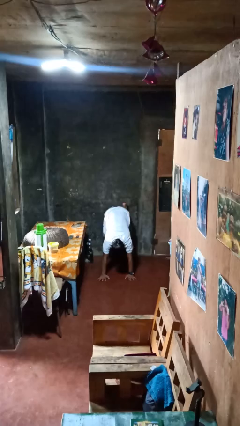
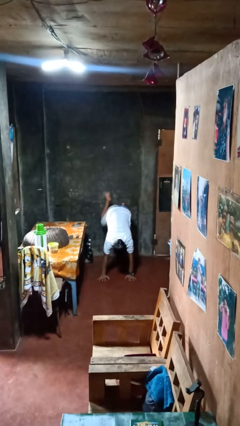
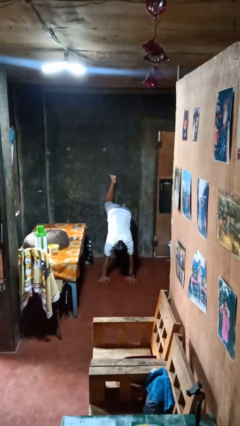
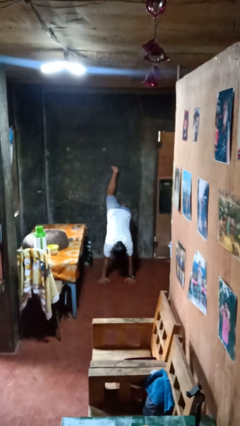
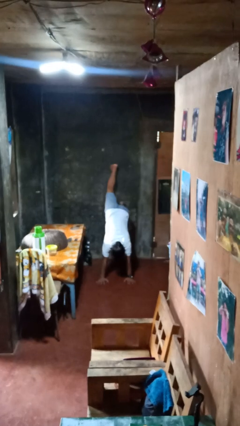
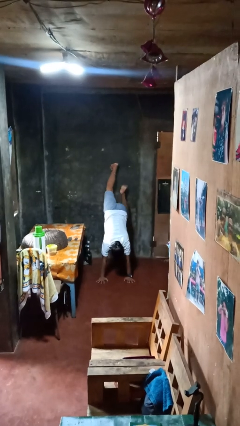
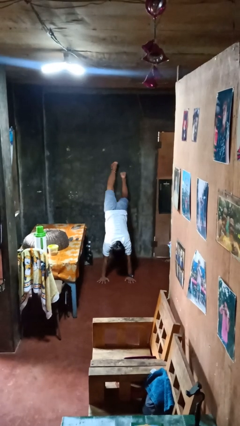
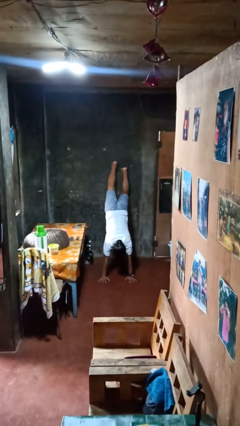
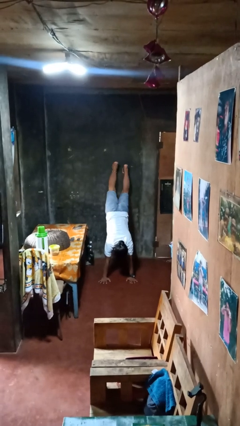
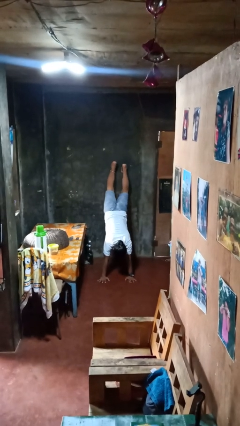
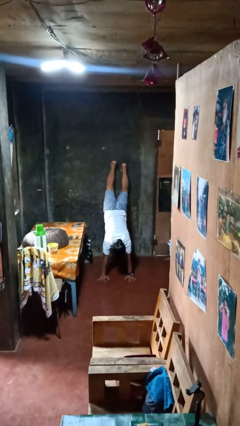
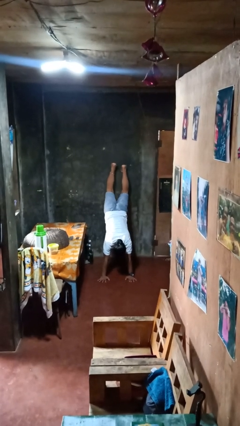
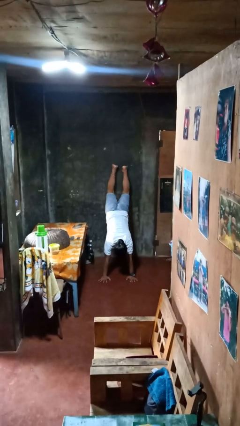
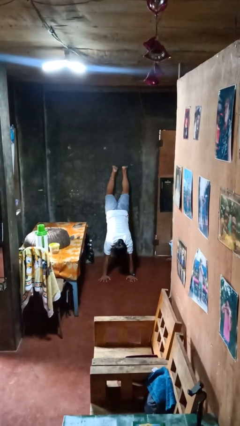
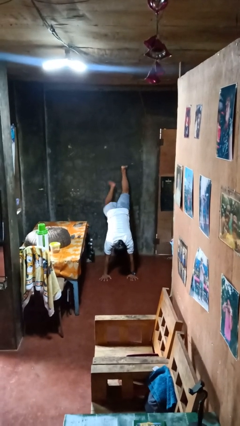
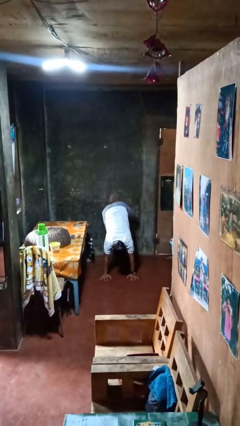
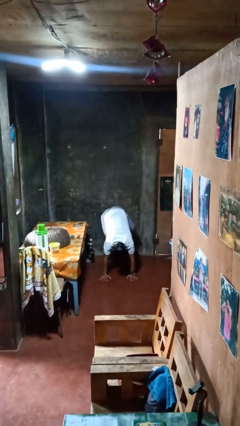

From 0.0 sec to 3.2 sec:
person handstand

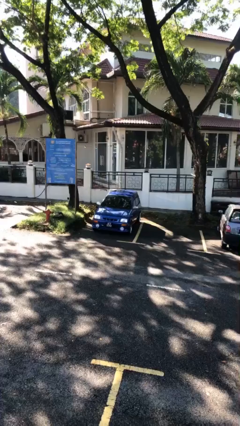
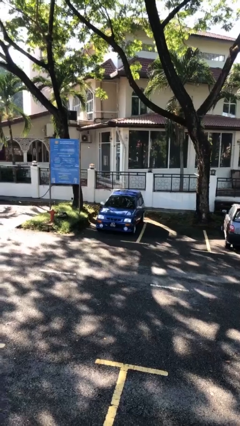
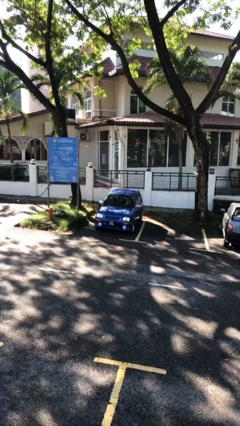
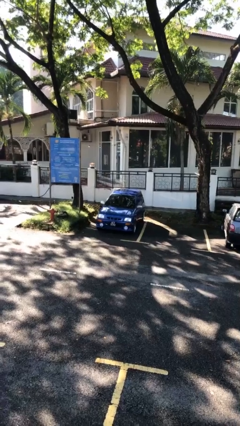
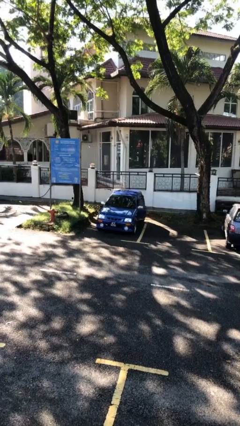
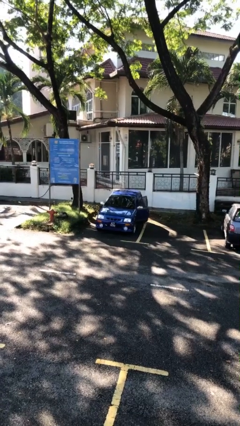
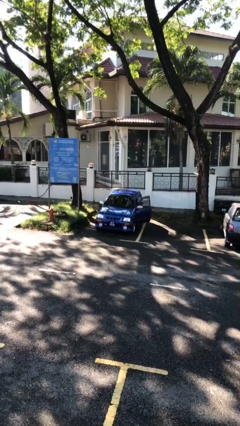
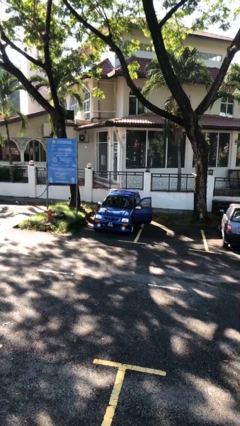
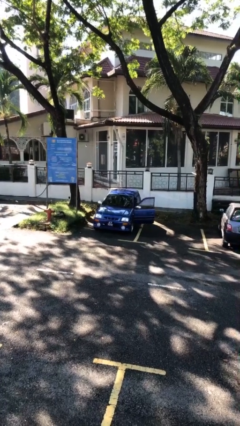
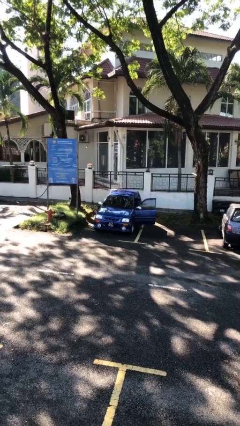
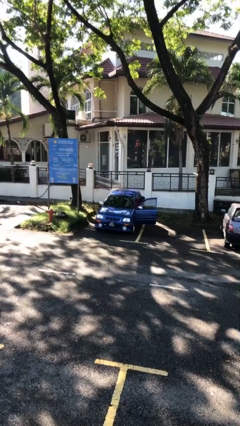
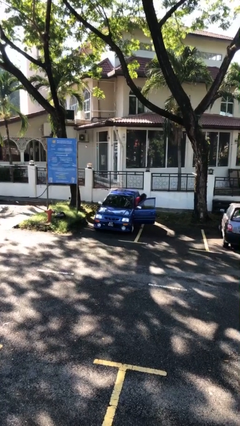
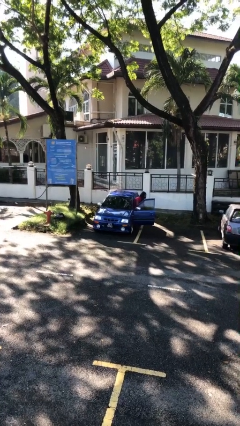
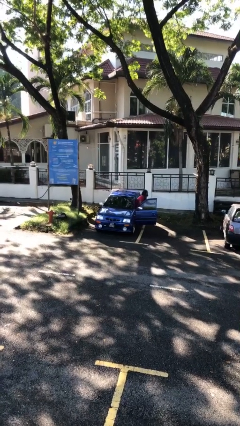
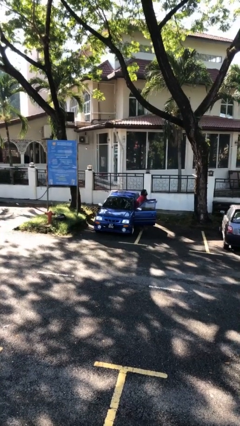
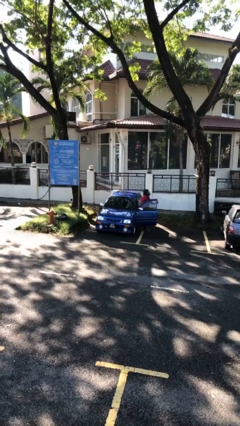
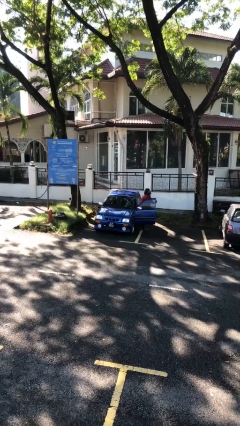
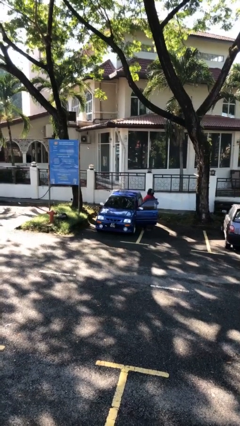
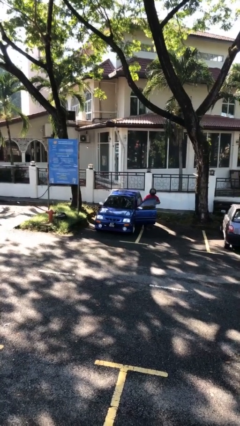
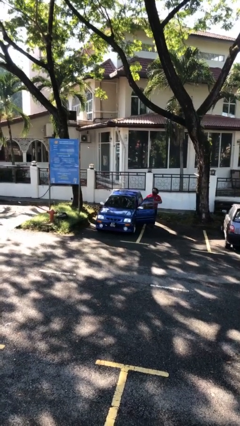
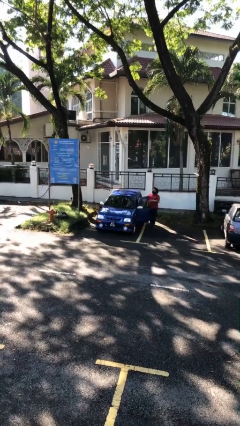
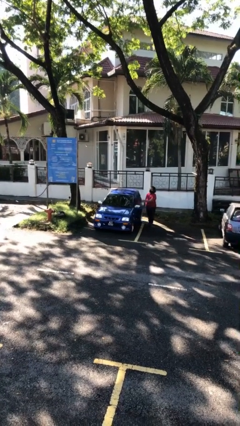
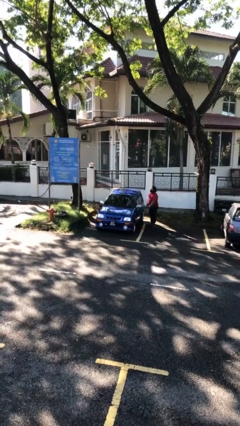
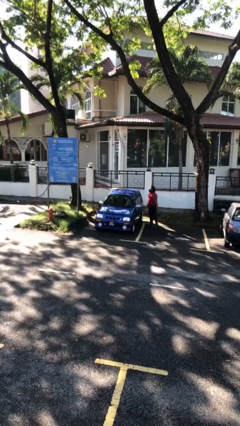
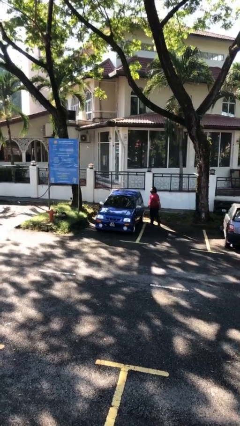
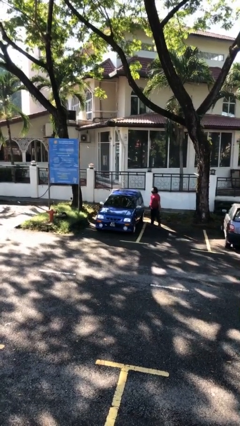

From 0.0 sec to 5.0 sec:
car drops off person

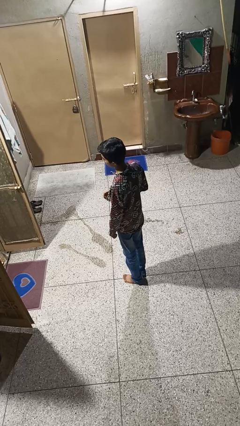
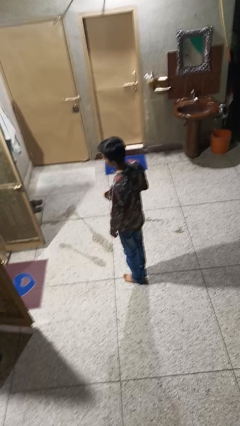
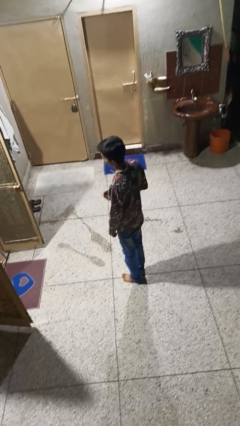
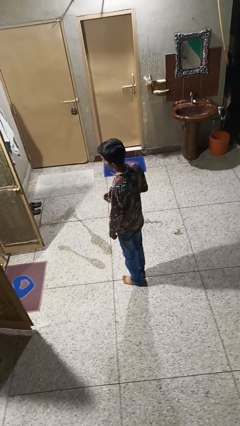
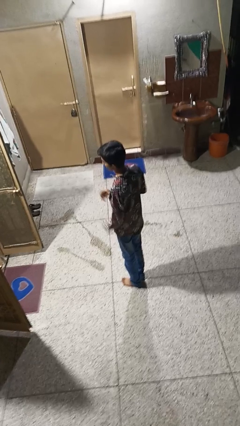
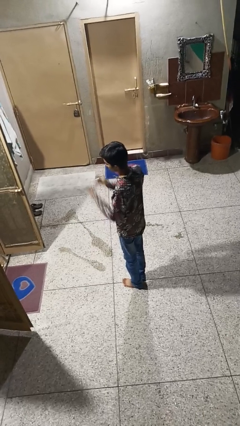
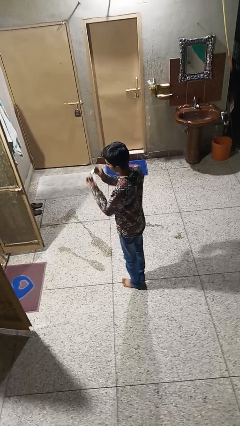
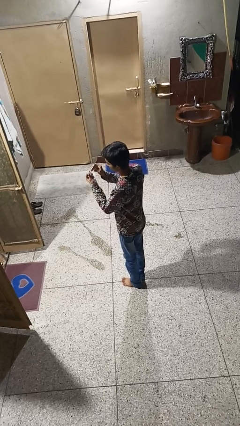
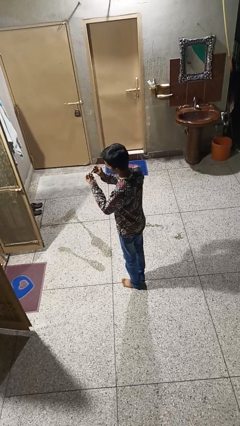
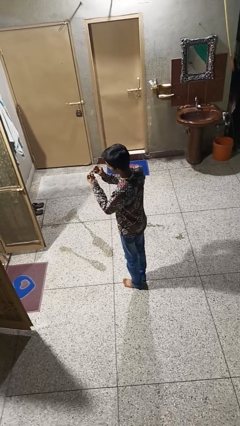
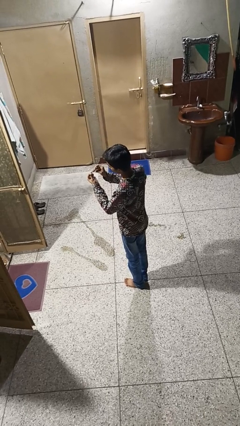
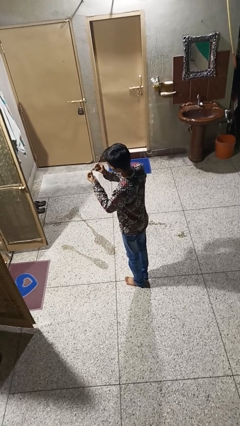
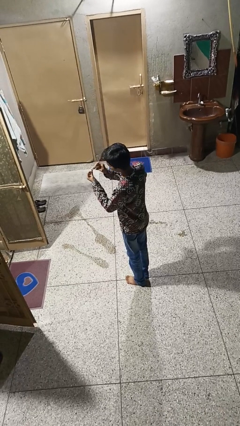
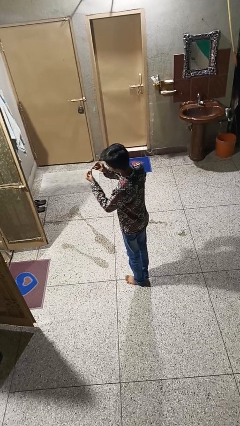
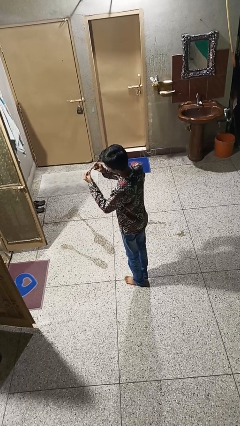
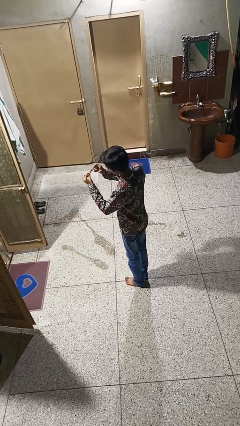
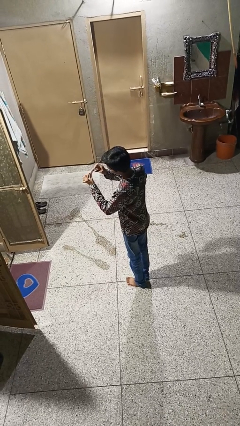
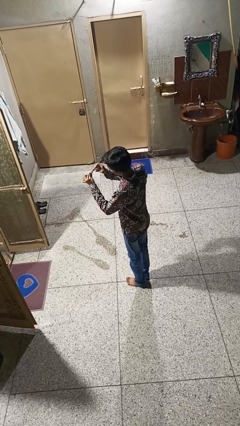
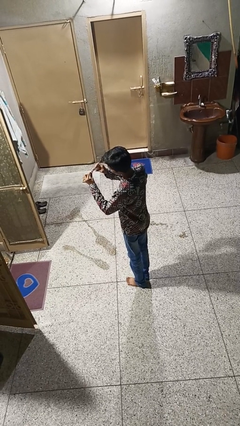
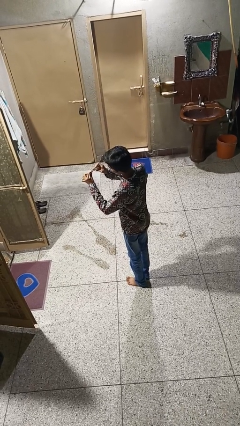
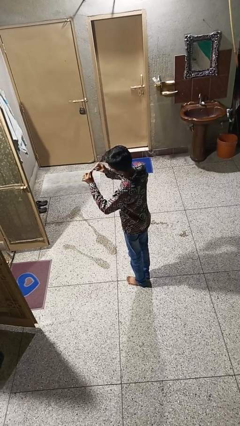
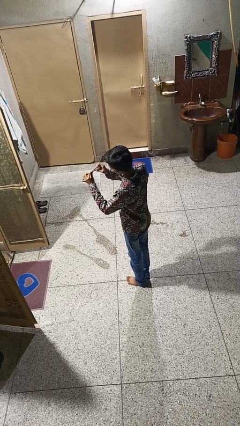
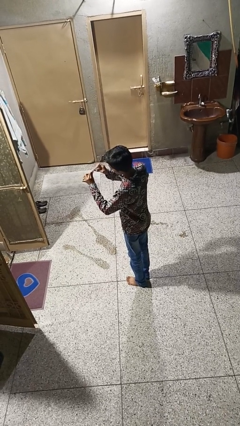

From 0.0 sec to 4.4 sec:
person clips fingernails

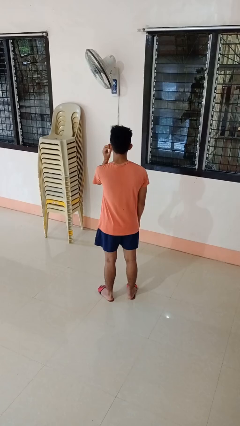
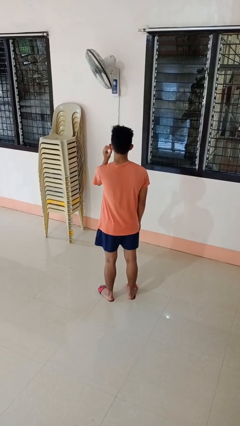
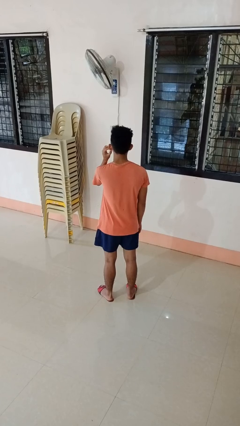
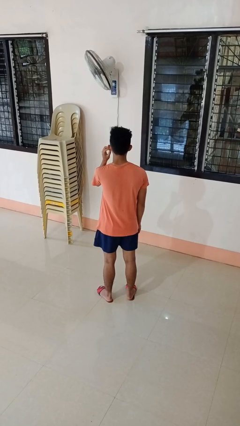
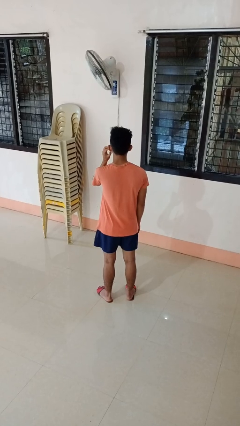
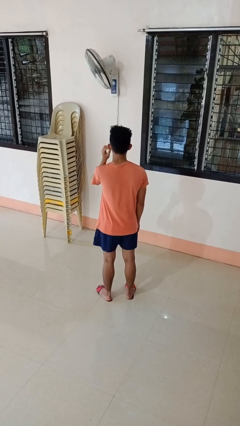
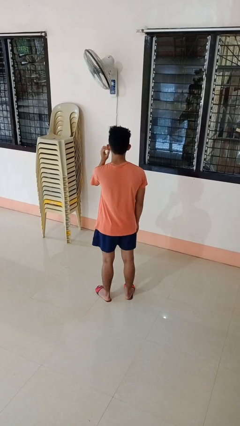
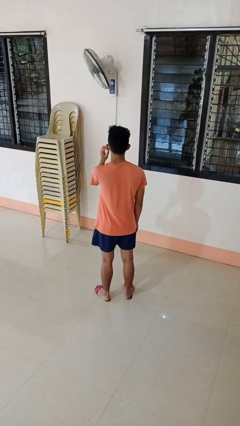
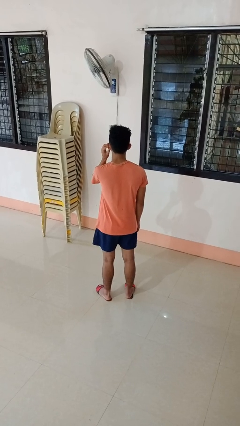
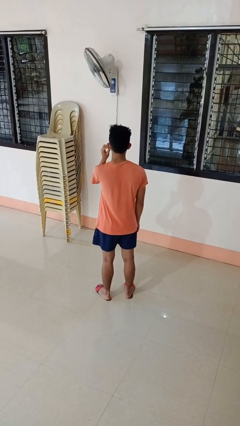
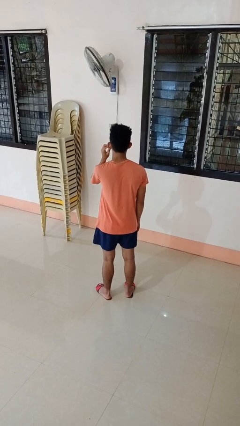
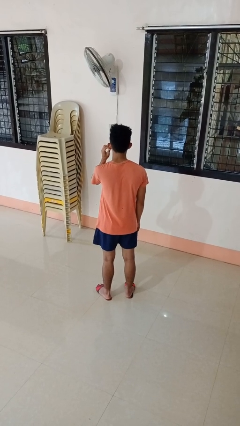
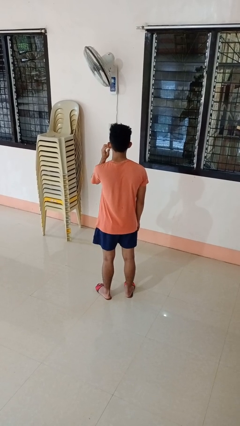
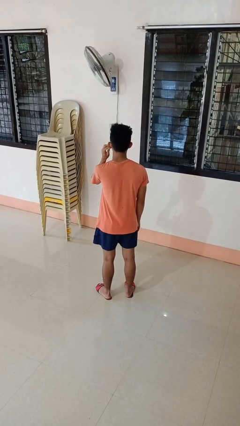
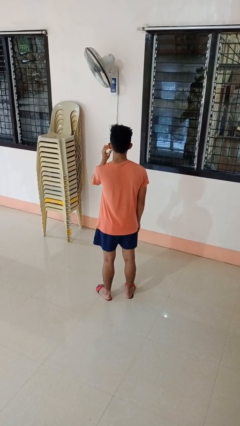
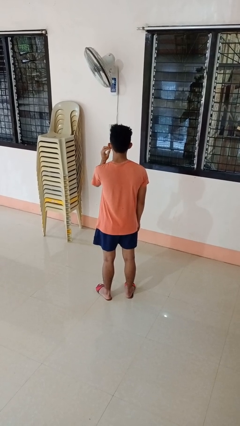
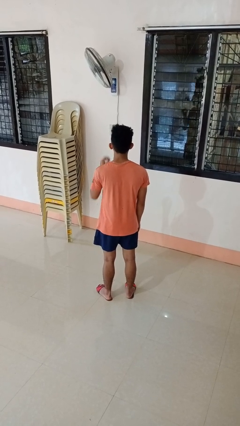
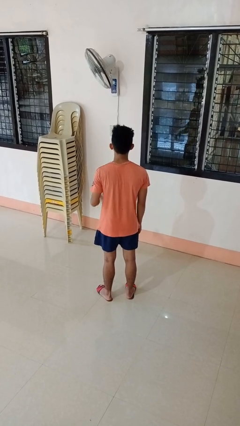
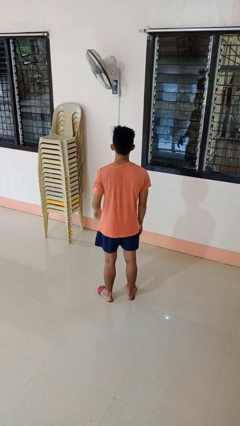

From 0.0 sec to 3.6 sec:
person touches earlobe

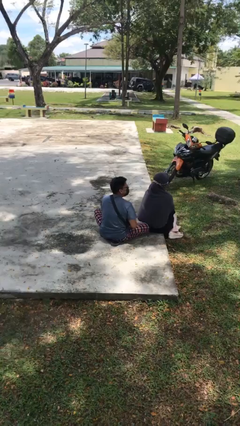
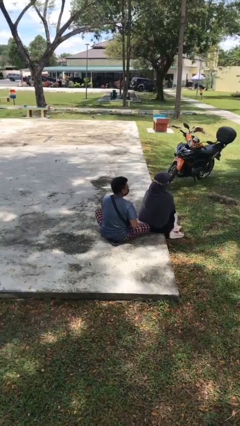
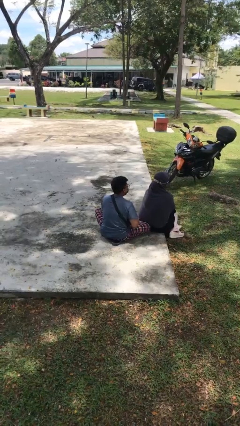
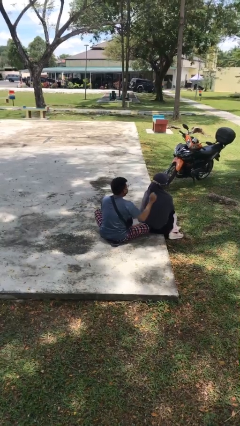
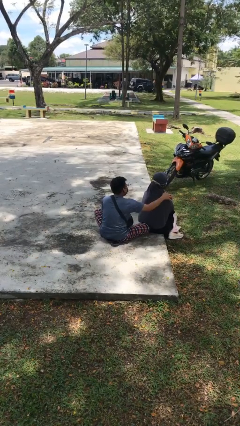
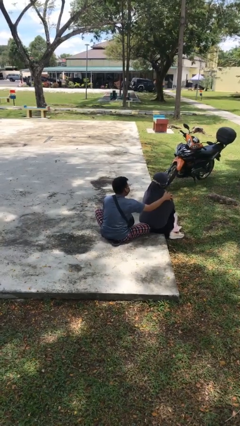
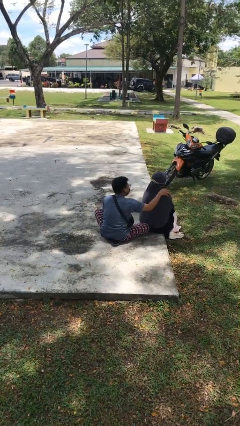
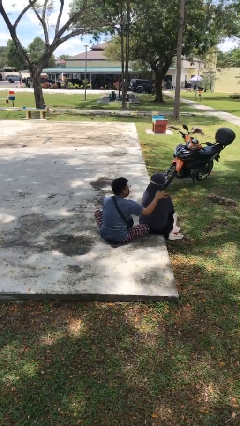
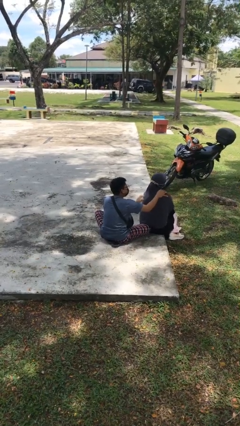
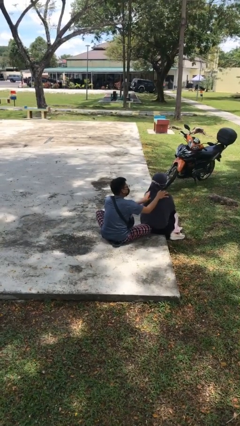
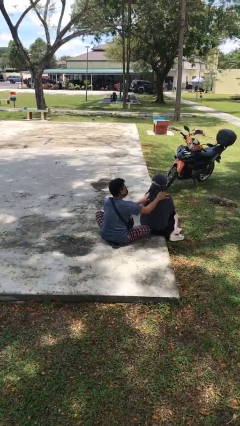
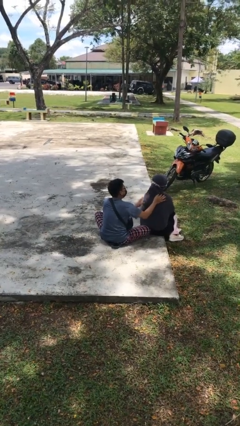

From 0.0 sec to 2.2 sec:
person pounds shoulders of person
